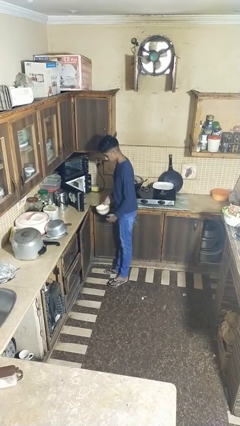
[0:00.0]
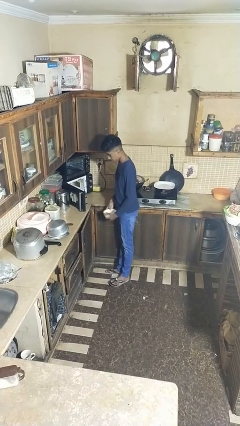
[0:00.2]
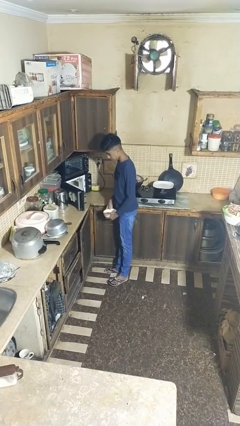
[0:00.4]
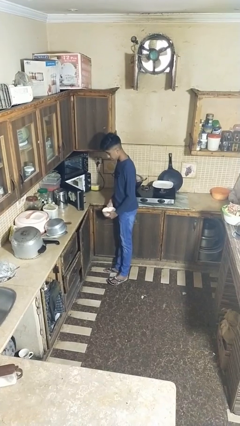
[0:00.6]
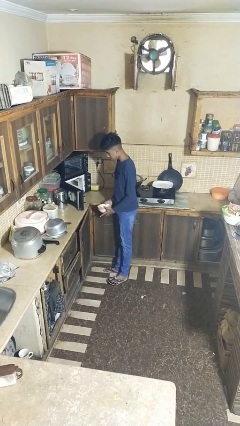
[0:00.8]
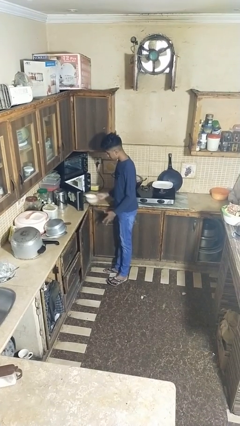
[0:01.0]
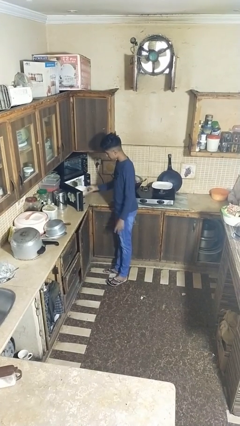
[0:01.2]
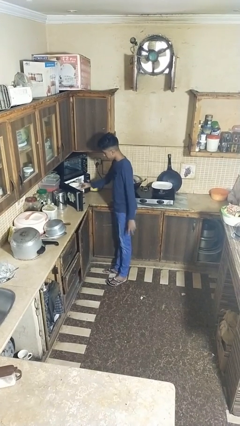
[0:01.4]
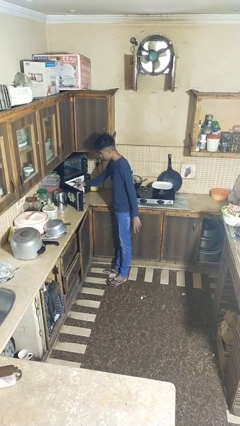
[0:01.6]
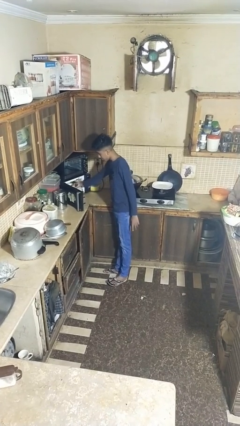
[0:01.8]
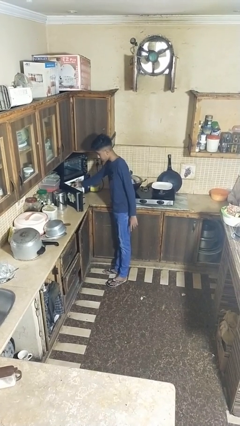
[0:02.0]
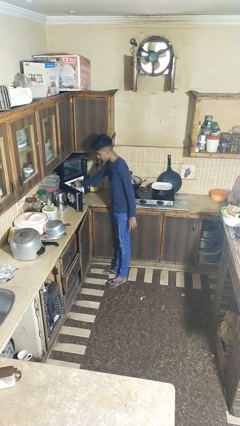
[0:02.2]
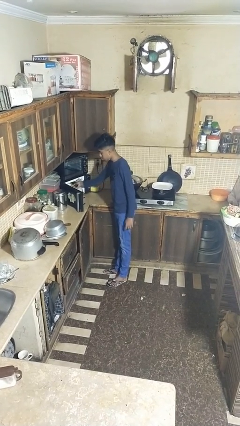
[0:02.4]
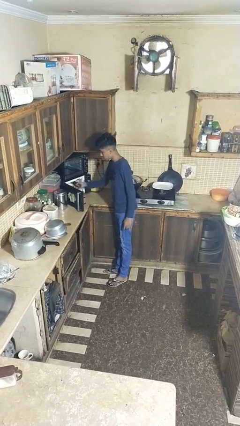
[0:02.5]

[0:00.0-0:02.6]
person puts object into microwave

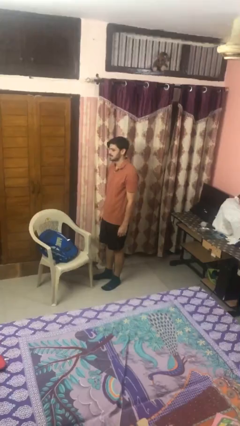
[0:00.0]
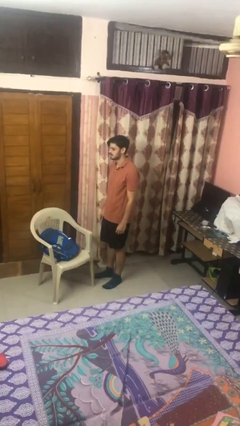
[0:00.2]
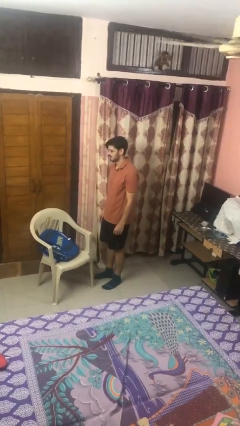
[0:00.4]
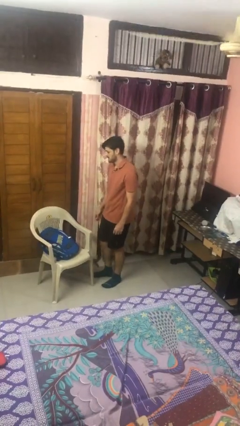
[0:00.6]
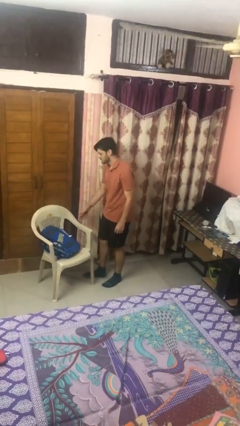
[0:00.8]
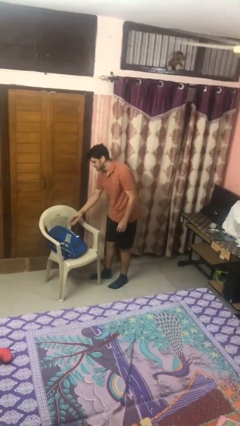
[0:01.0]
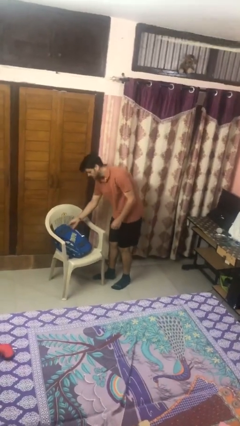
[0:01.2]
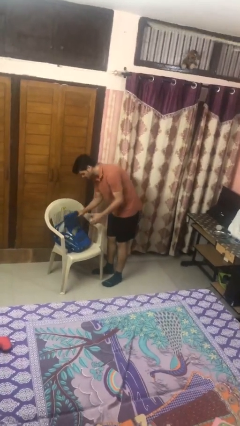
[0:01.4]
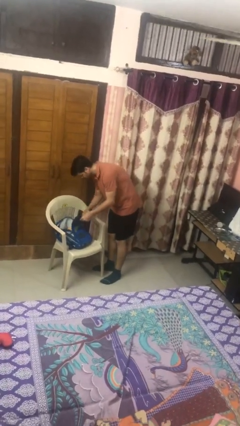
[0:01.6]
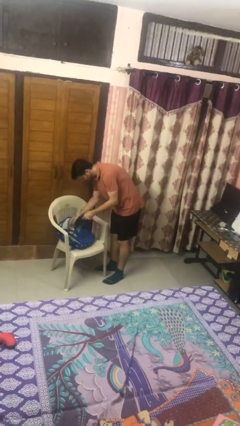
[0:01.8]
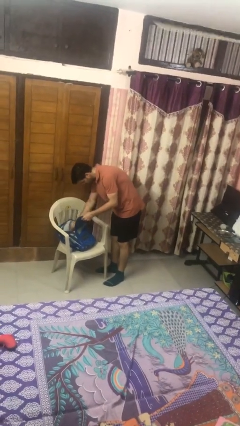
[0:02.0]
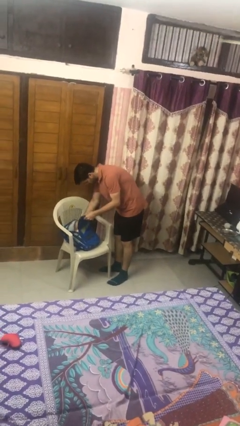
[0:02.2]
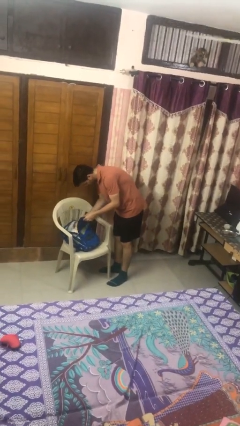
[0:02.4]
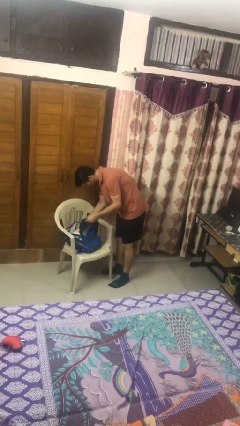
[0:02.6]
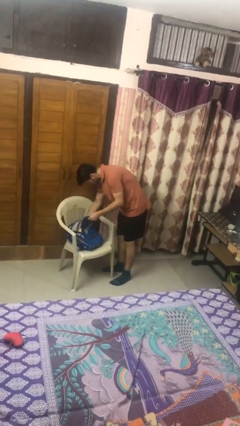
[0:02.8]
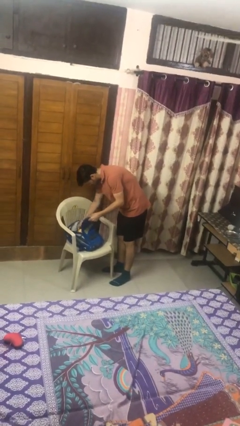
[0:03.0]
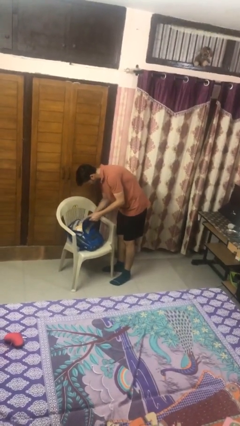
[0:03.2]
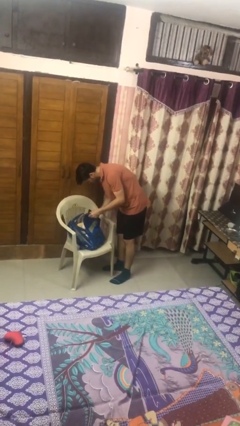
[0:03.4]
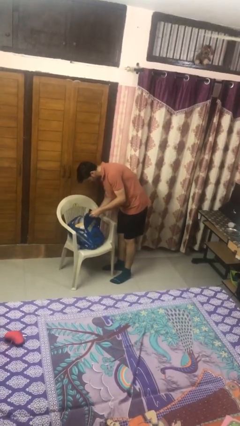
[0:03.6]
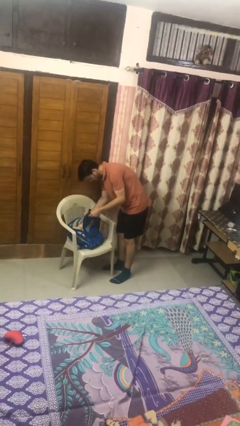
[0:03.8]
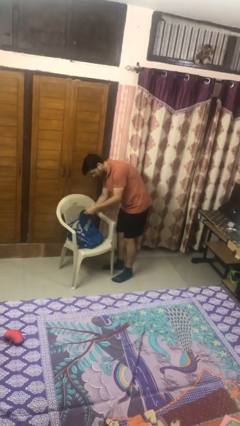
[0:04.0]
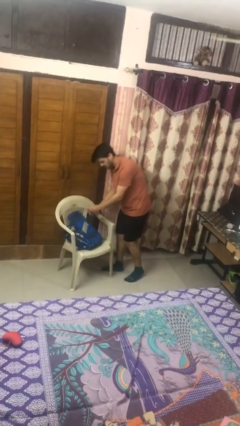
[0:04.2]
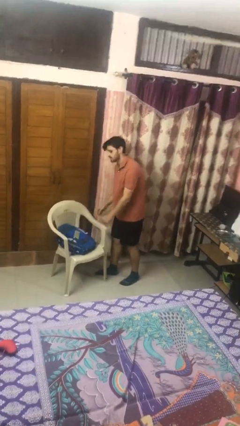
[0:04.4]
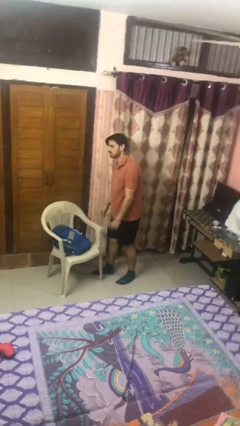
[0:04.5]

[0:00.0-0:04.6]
person searches in bag

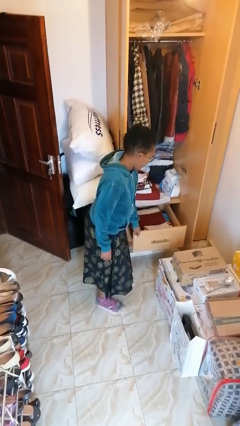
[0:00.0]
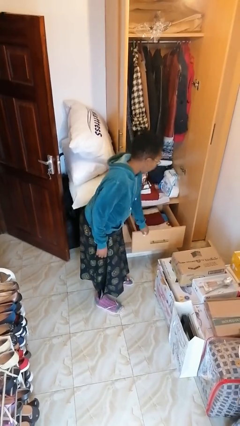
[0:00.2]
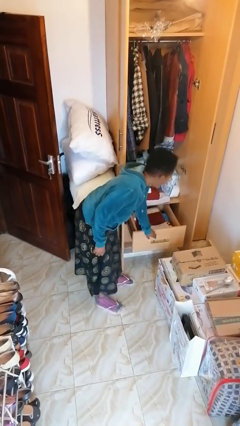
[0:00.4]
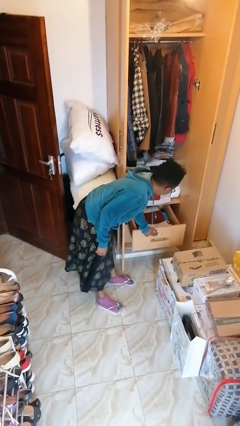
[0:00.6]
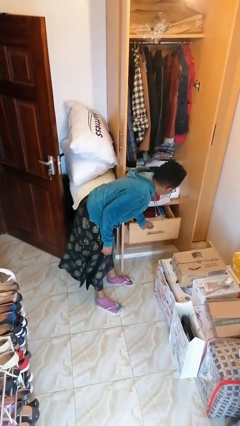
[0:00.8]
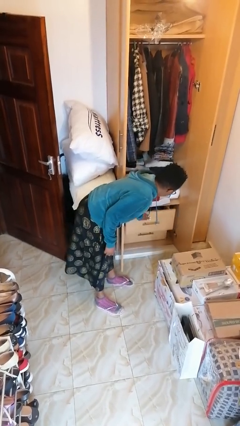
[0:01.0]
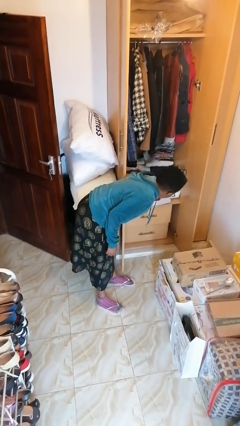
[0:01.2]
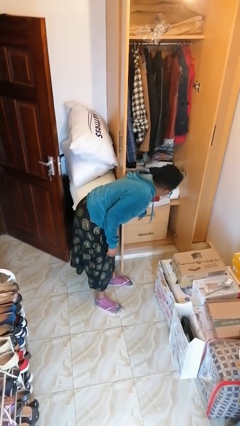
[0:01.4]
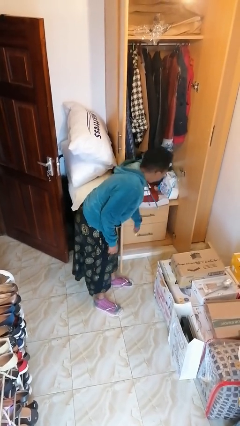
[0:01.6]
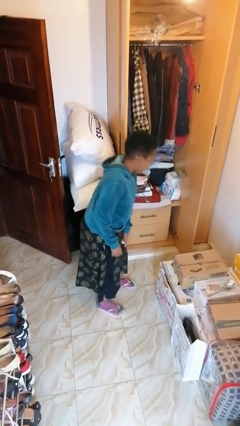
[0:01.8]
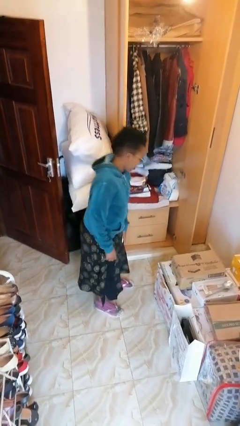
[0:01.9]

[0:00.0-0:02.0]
person closes dresser drawer

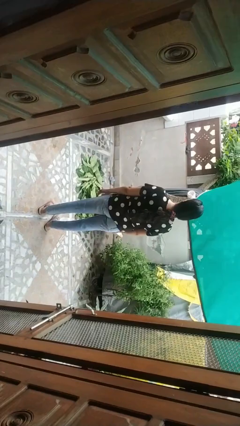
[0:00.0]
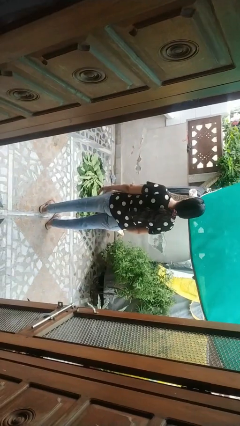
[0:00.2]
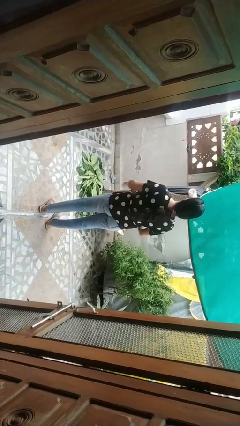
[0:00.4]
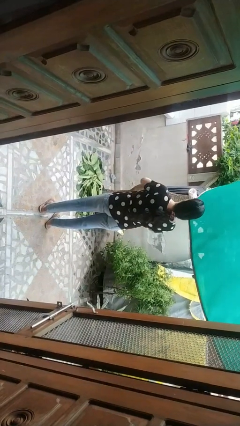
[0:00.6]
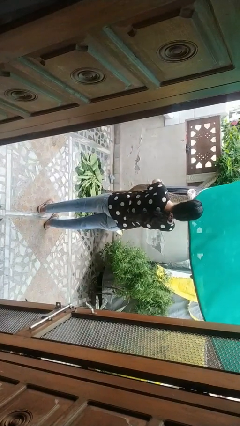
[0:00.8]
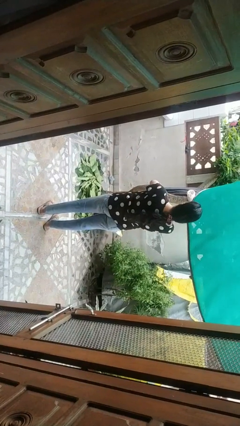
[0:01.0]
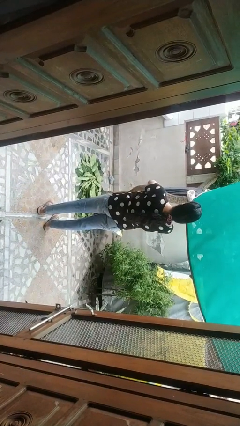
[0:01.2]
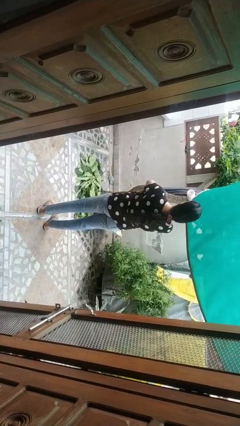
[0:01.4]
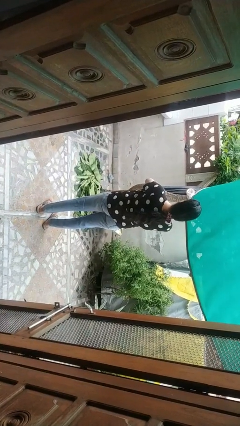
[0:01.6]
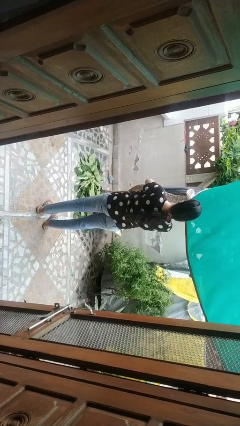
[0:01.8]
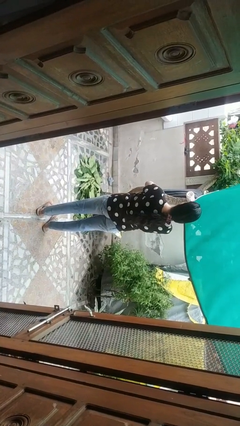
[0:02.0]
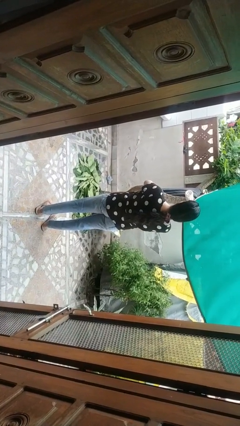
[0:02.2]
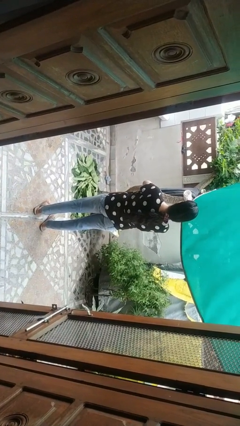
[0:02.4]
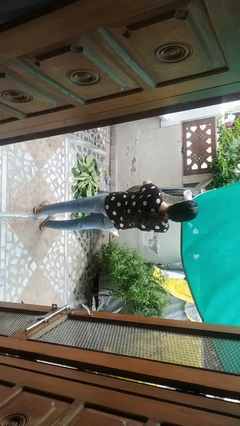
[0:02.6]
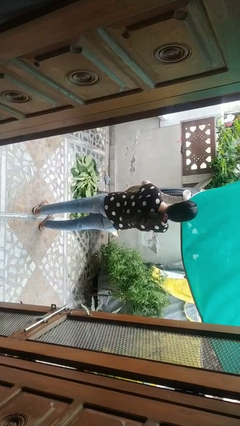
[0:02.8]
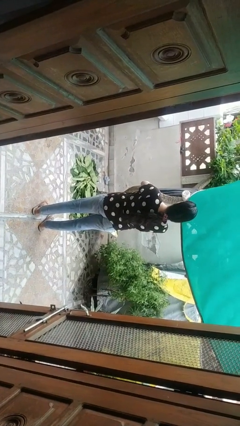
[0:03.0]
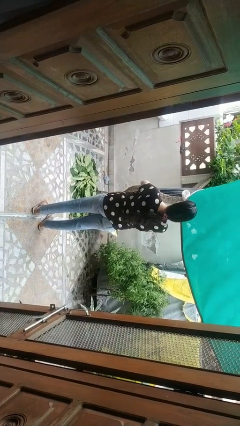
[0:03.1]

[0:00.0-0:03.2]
person crosses arms

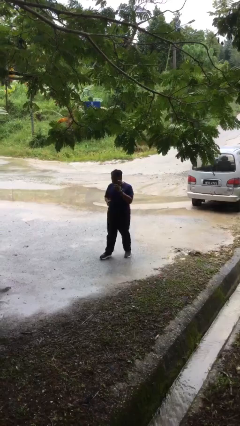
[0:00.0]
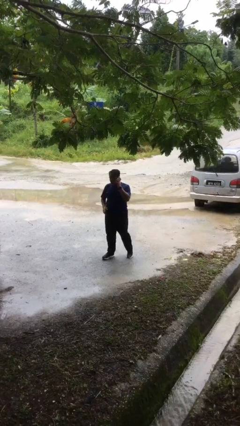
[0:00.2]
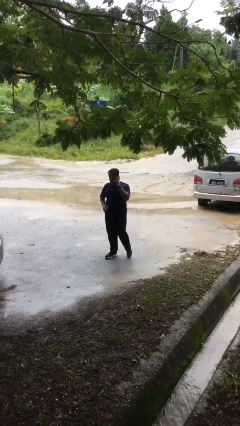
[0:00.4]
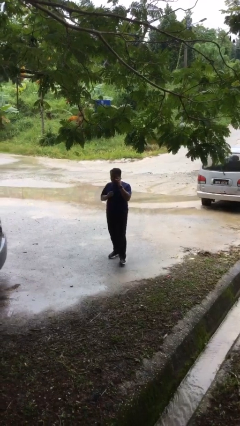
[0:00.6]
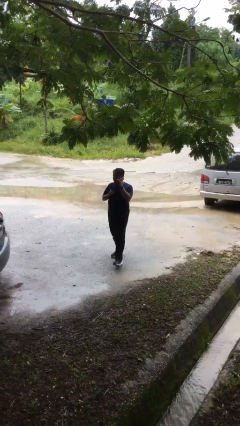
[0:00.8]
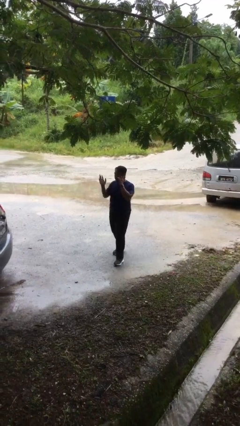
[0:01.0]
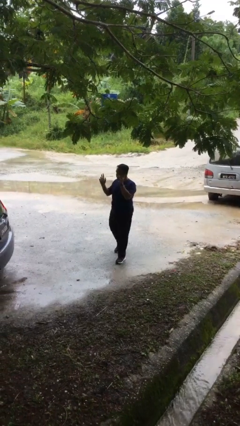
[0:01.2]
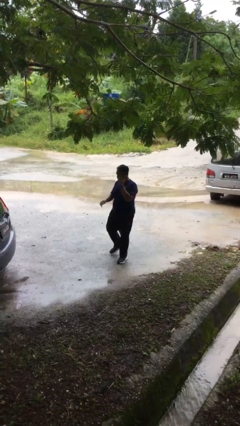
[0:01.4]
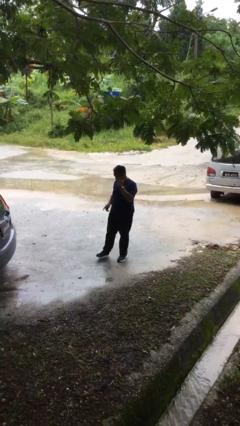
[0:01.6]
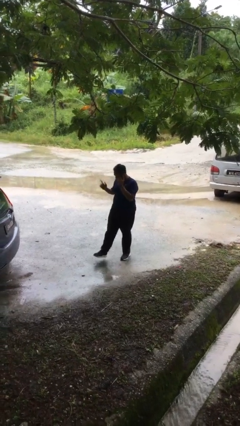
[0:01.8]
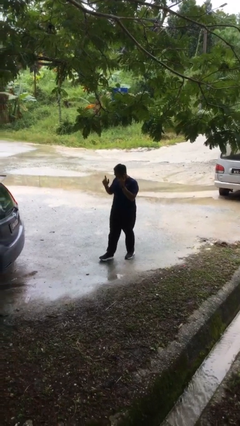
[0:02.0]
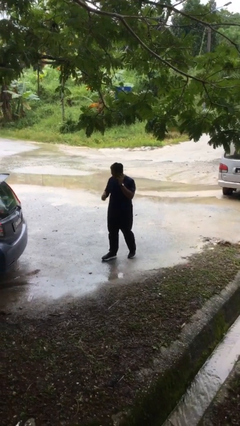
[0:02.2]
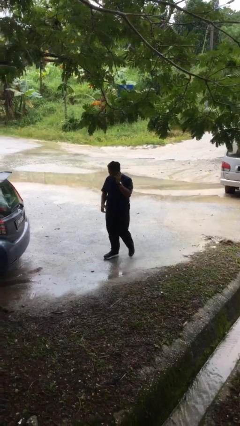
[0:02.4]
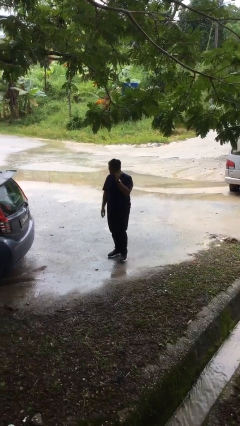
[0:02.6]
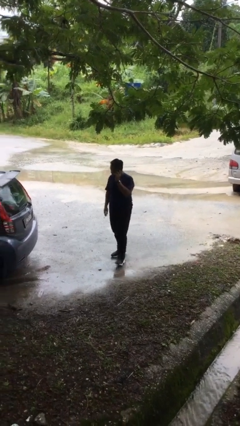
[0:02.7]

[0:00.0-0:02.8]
person talks on phone

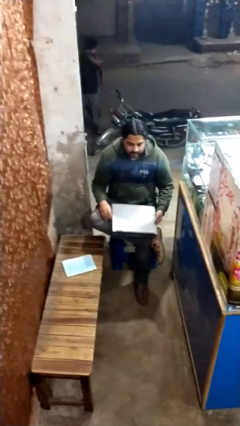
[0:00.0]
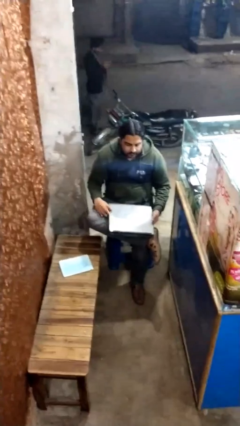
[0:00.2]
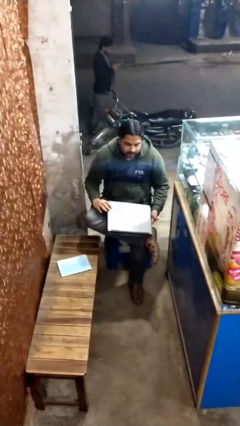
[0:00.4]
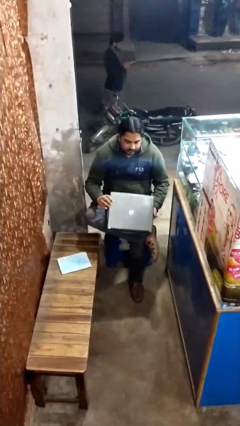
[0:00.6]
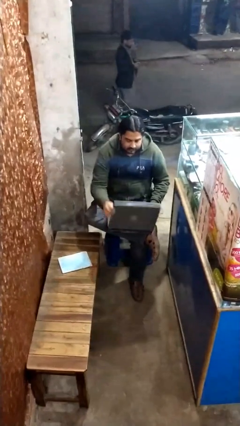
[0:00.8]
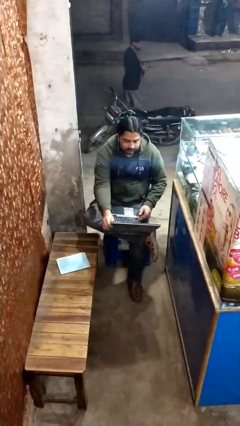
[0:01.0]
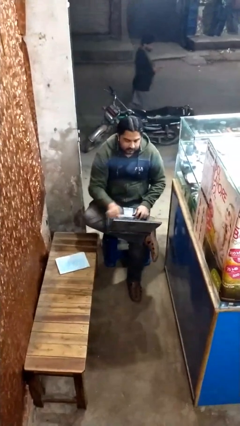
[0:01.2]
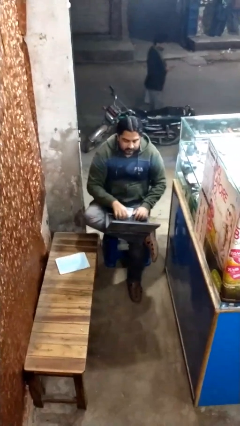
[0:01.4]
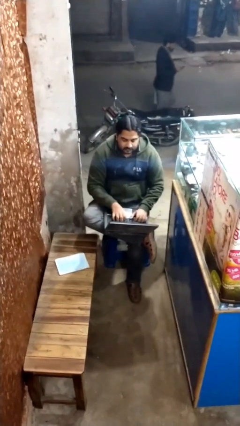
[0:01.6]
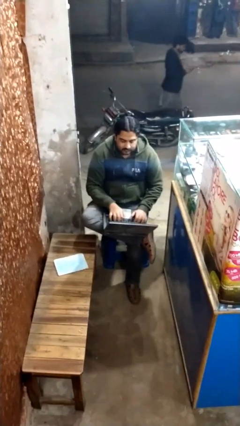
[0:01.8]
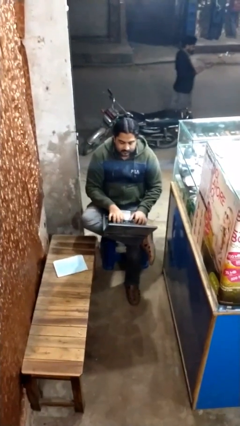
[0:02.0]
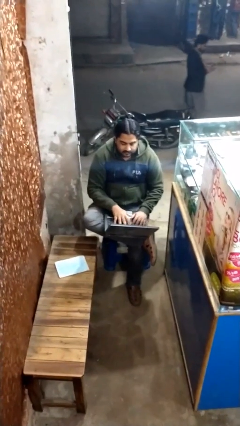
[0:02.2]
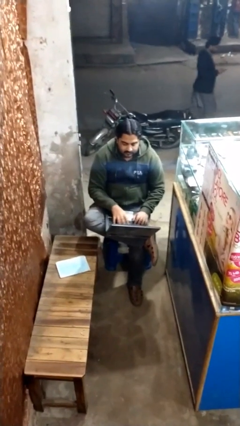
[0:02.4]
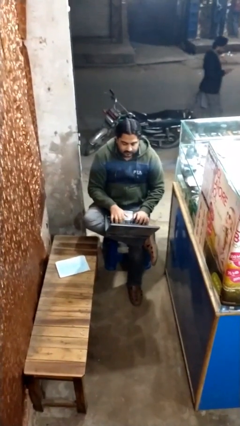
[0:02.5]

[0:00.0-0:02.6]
person interacts with laptop
